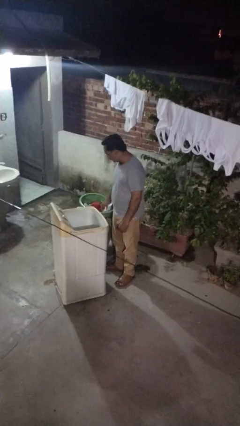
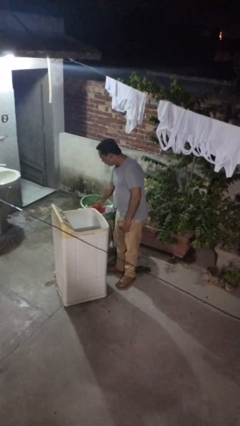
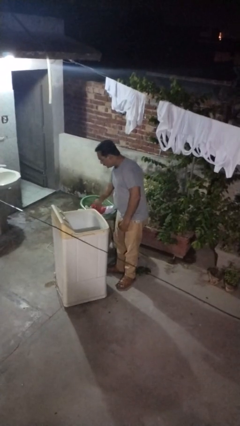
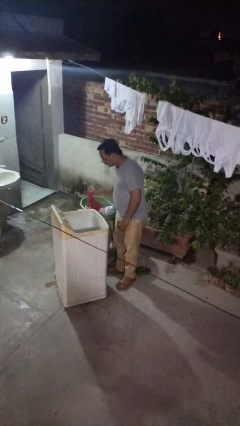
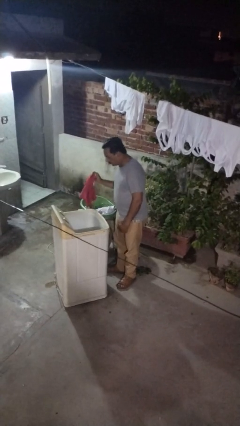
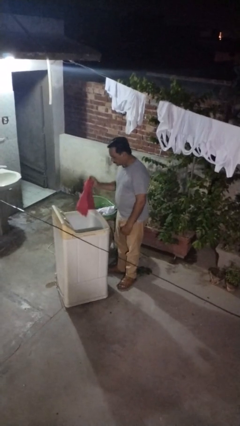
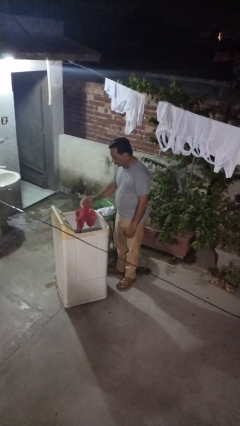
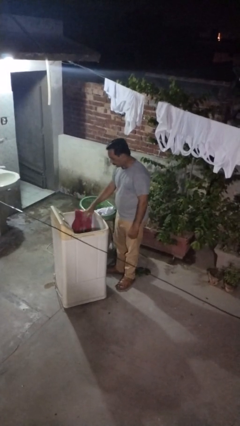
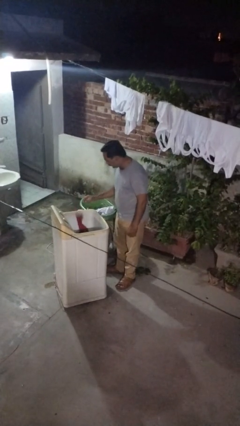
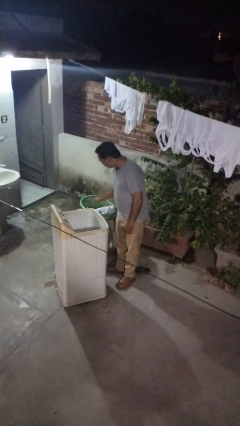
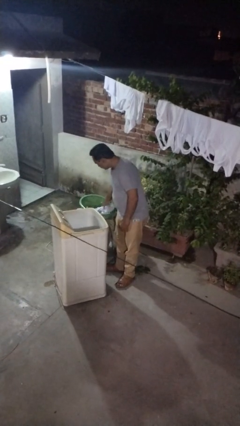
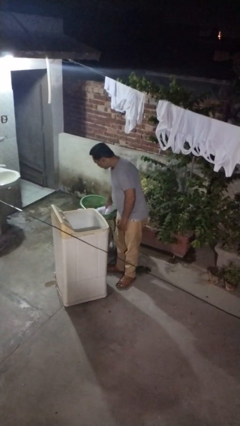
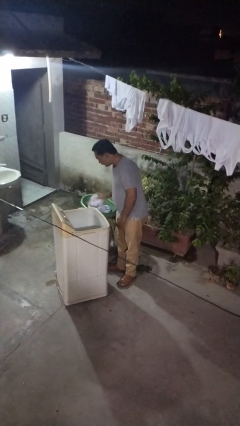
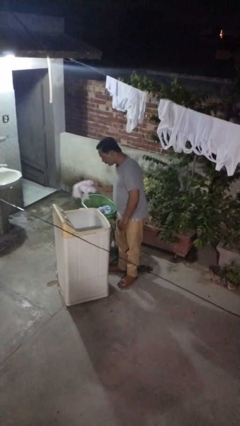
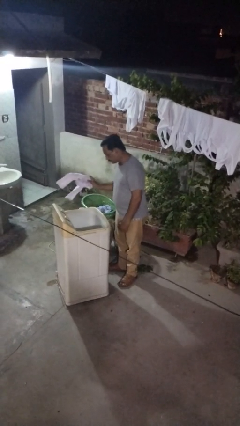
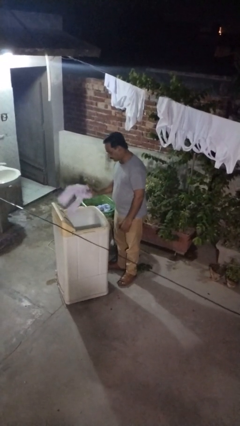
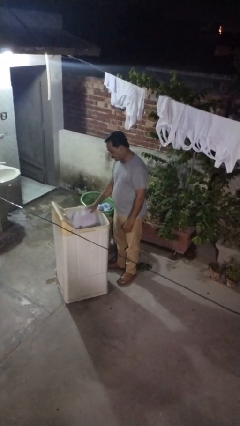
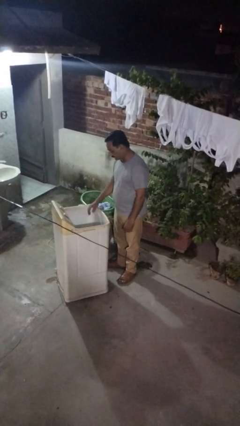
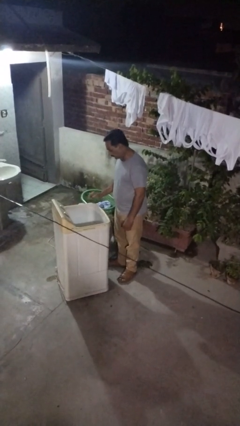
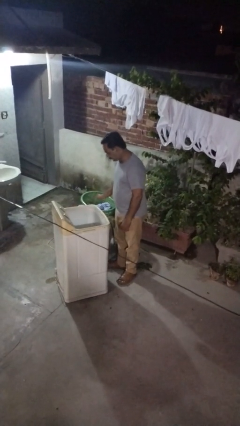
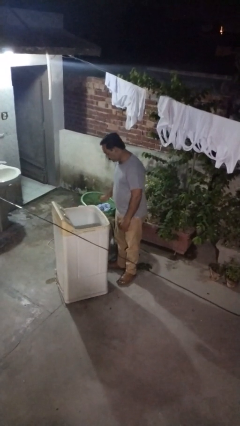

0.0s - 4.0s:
person unloads clotheswasher

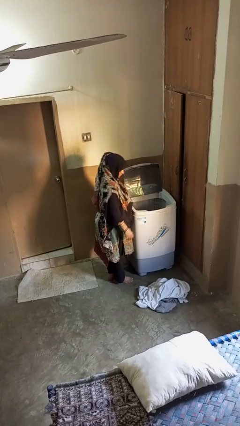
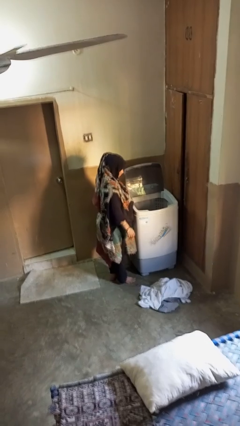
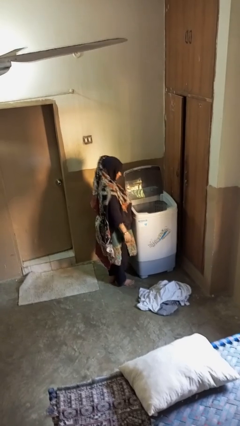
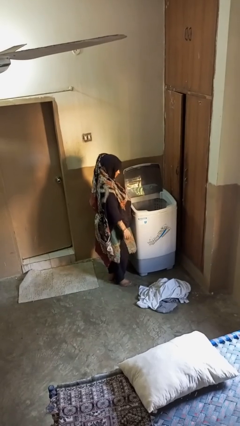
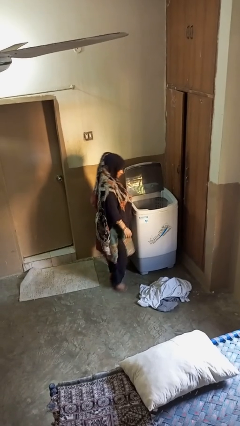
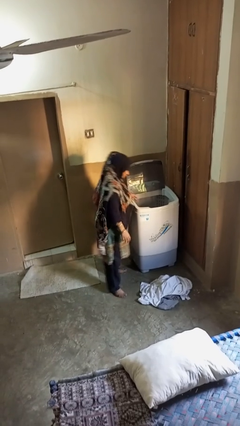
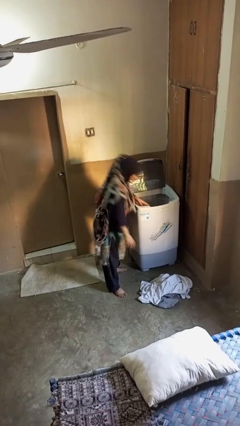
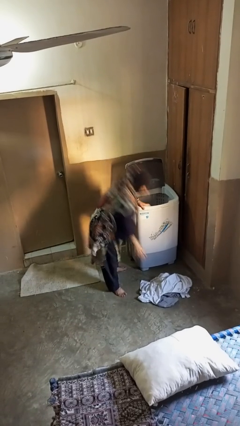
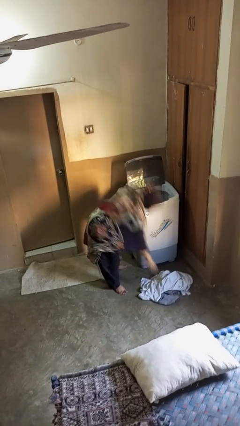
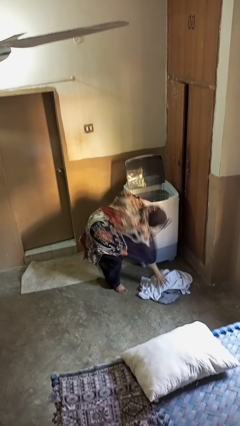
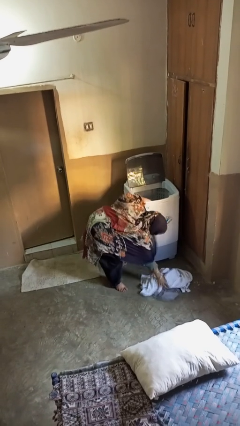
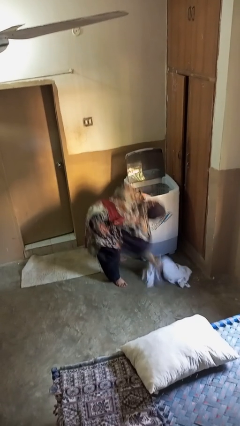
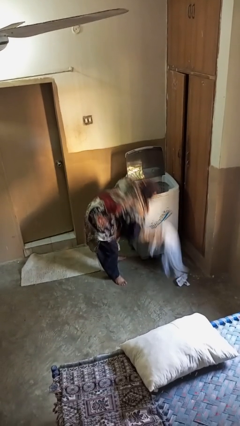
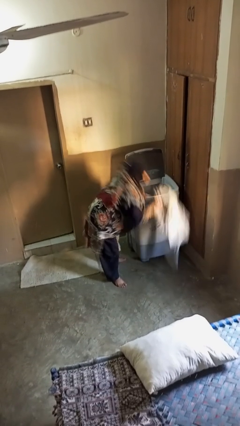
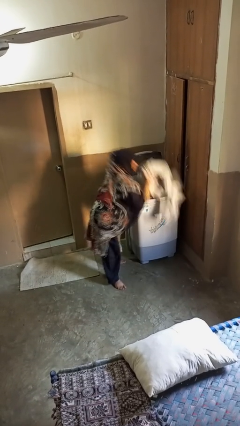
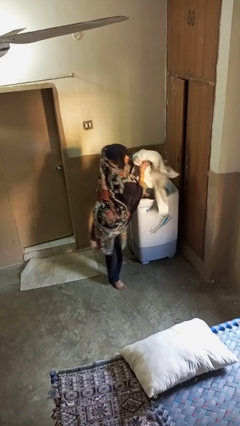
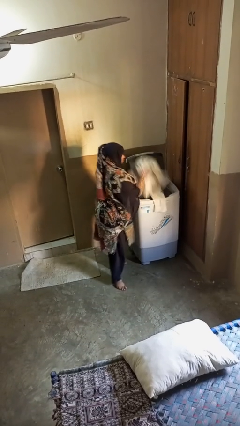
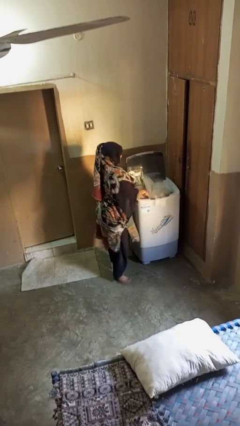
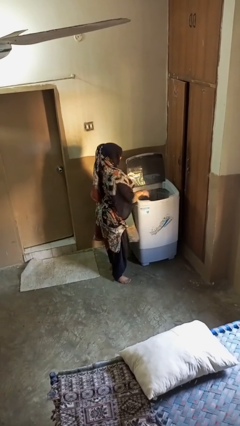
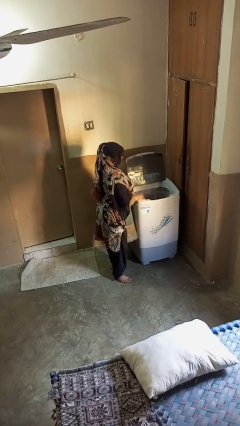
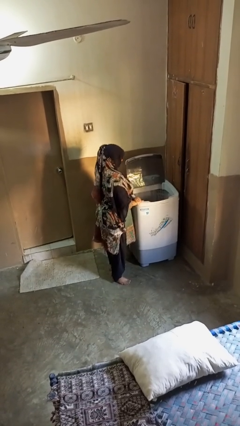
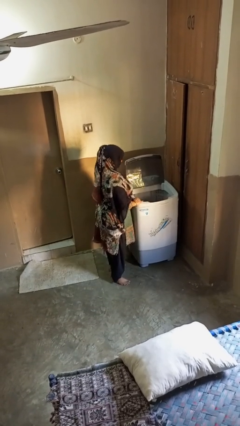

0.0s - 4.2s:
person loads clotheswasher

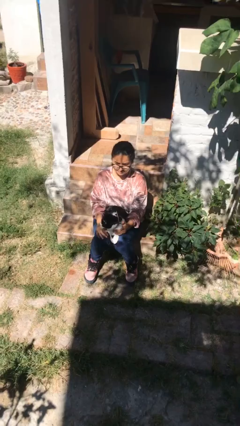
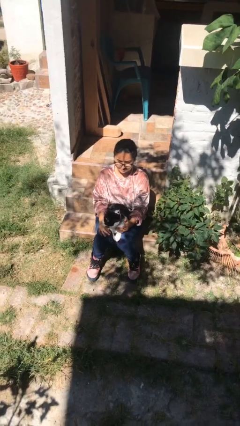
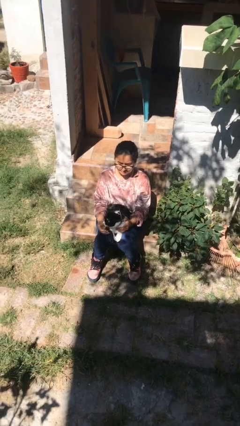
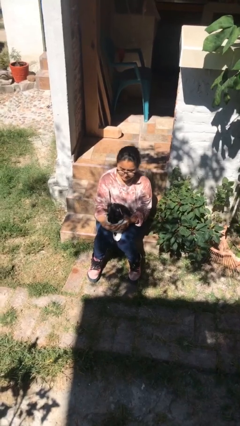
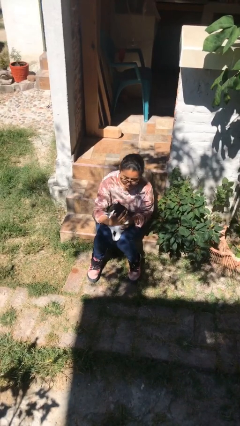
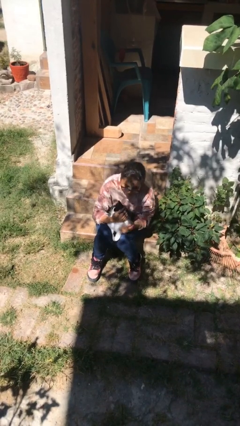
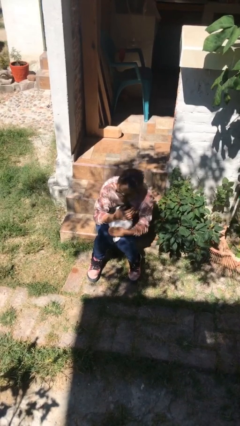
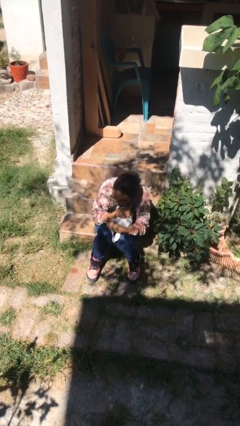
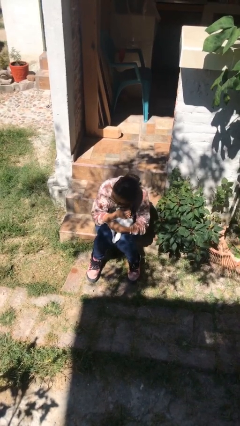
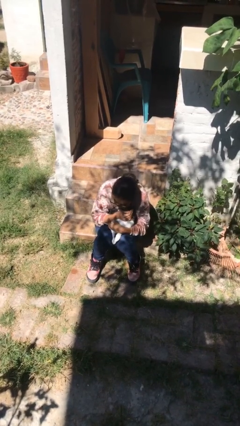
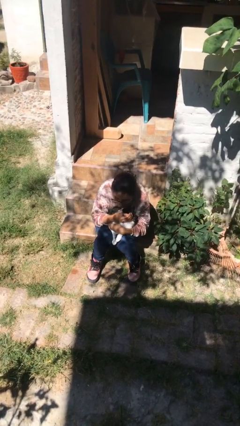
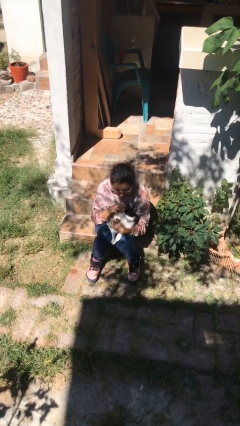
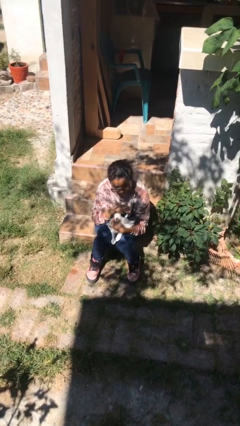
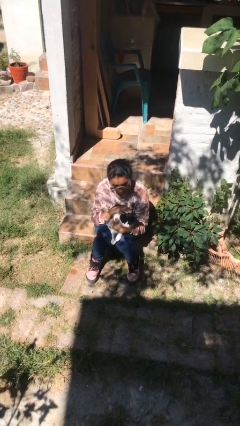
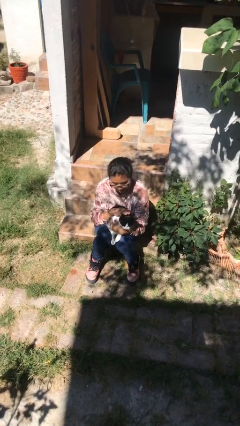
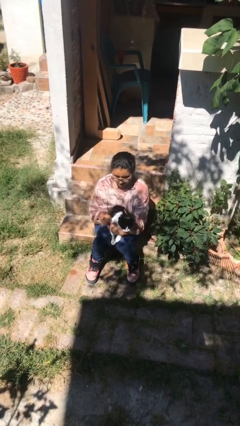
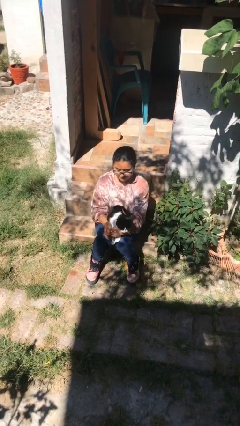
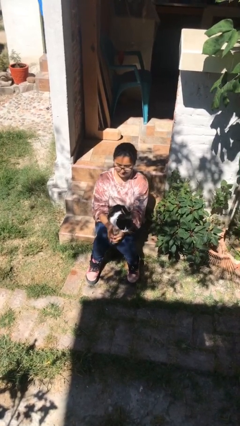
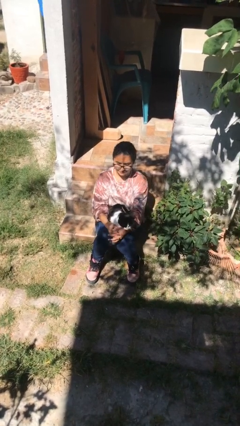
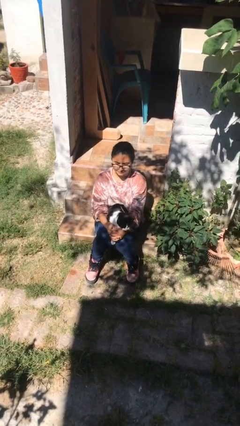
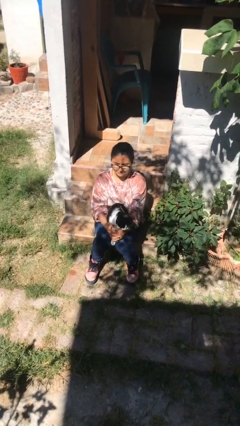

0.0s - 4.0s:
person hugs cat

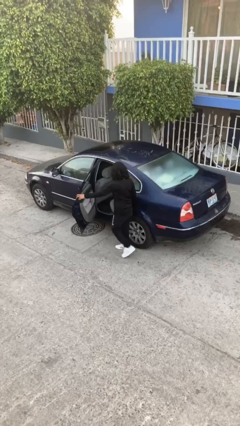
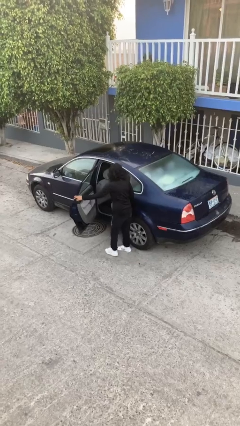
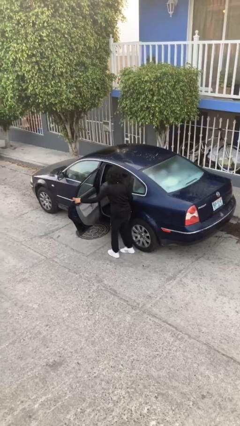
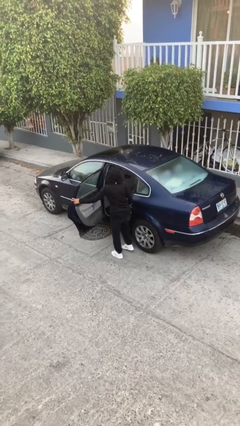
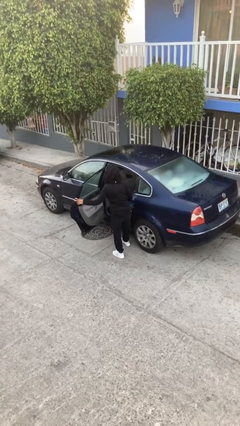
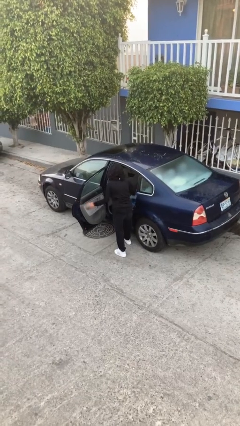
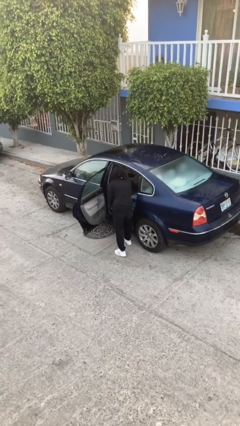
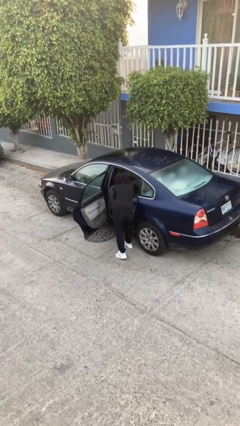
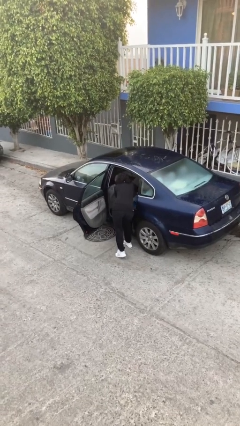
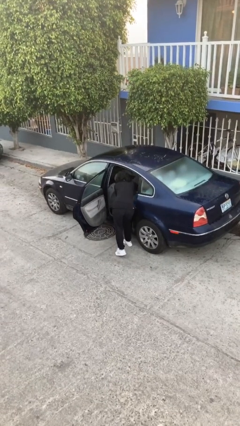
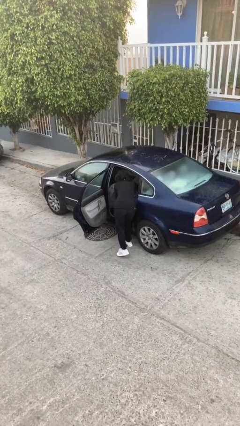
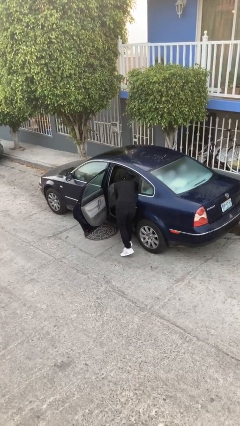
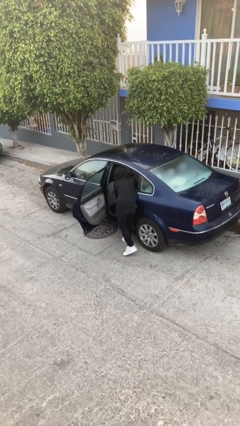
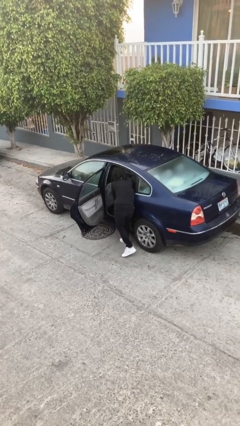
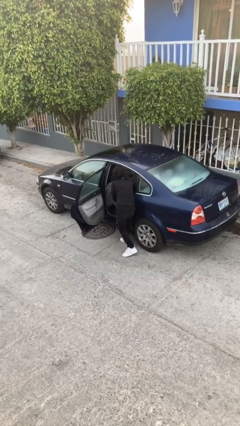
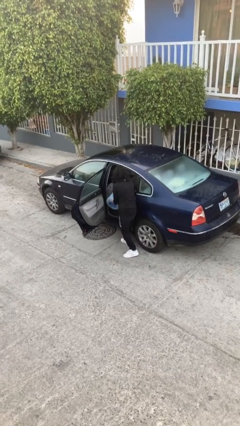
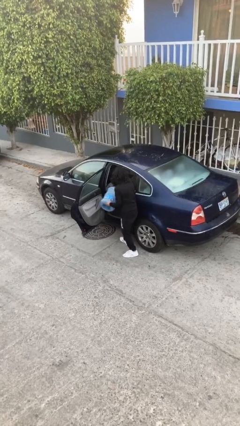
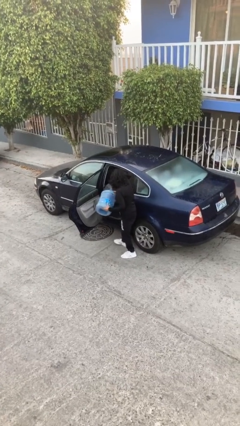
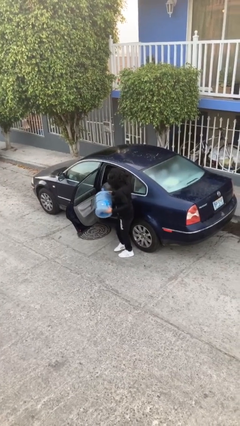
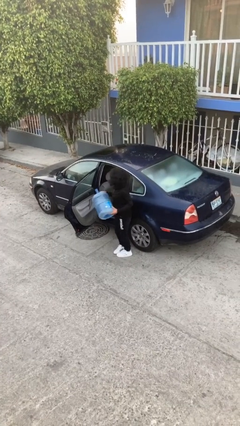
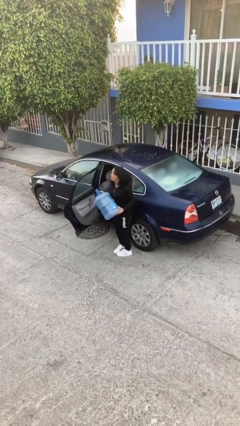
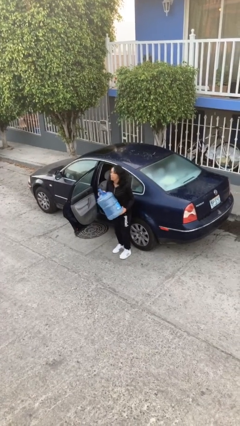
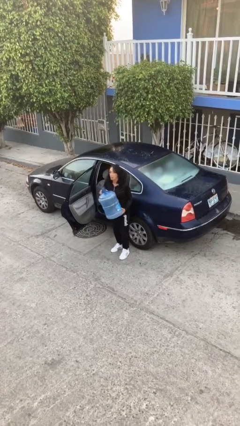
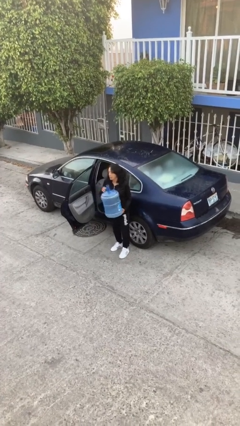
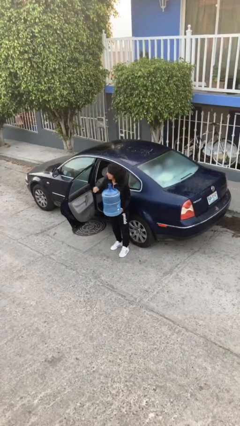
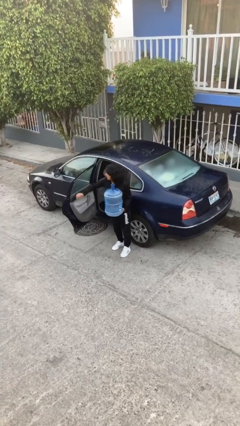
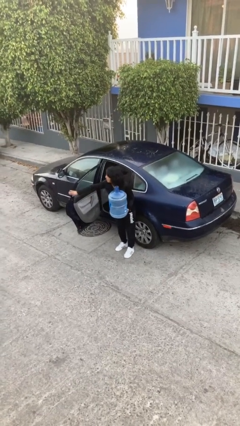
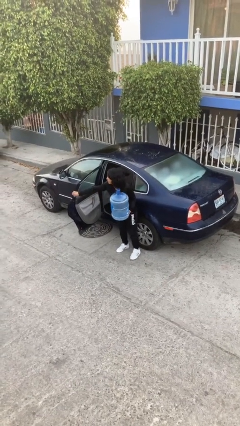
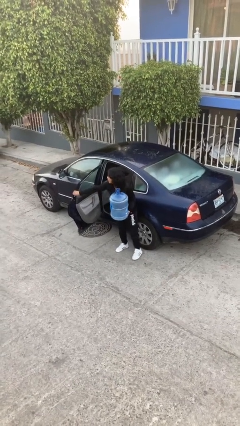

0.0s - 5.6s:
person unloads car
